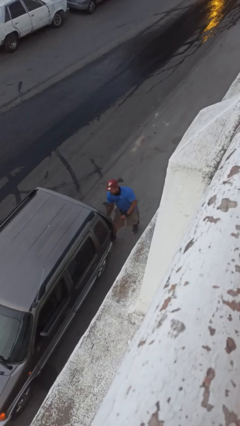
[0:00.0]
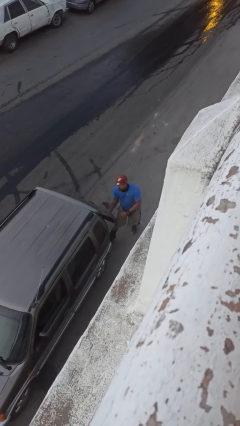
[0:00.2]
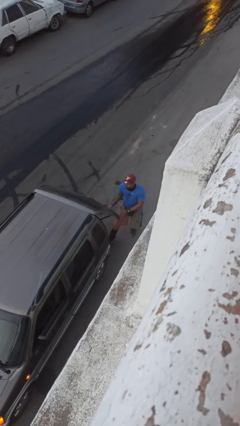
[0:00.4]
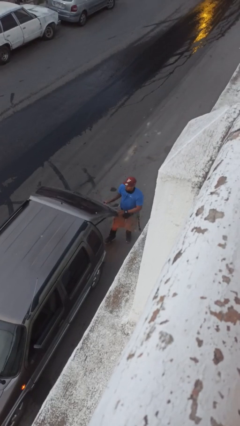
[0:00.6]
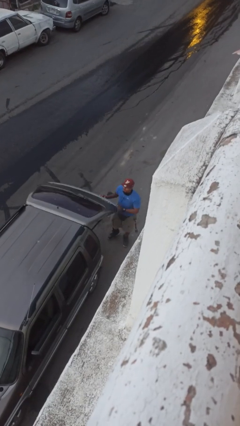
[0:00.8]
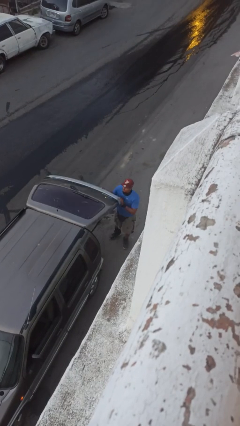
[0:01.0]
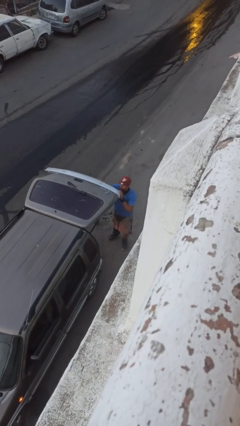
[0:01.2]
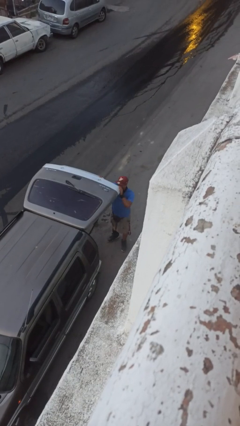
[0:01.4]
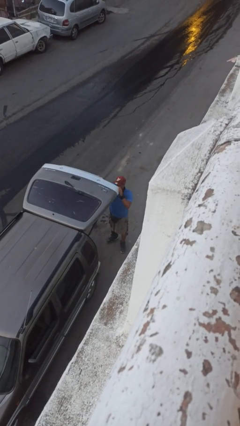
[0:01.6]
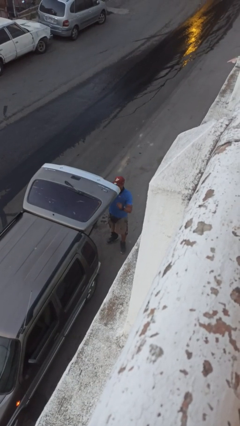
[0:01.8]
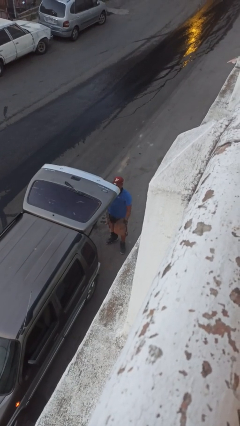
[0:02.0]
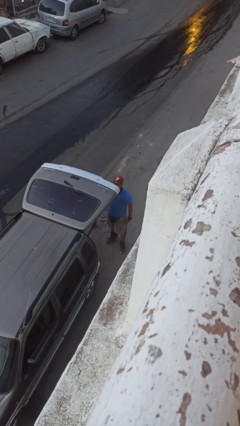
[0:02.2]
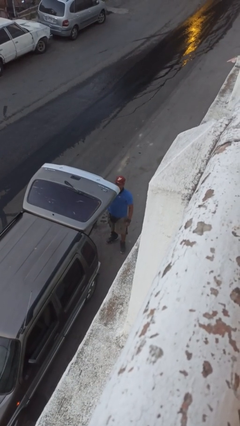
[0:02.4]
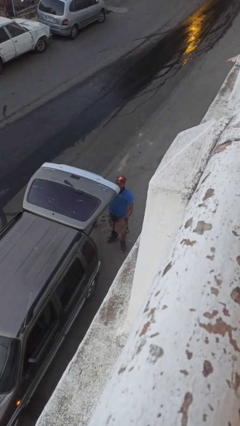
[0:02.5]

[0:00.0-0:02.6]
person opens car trunk

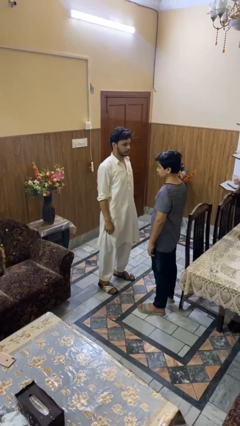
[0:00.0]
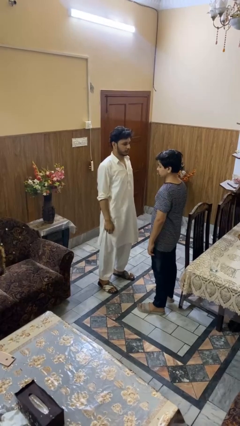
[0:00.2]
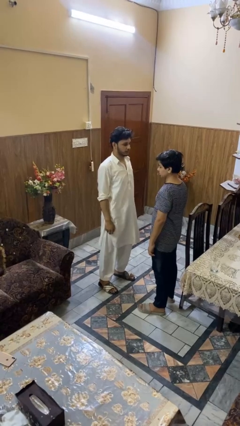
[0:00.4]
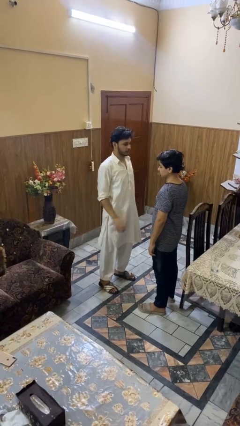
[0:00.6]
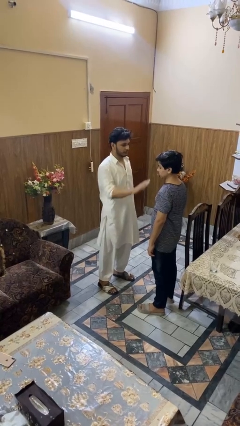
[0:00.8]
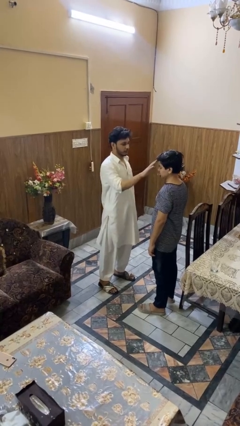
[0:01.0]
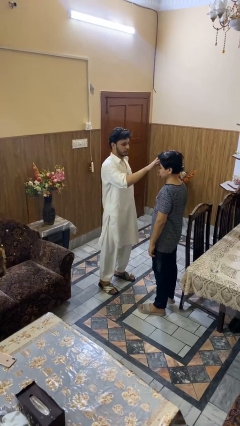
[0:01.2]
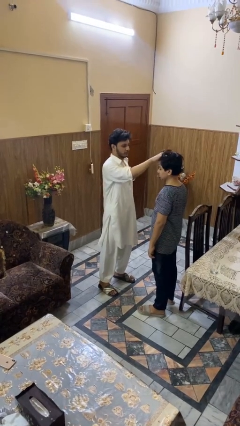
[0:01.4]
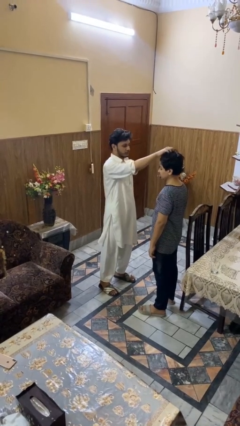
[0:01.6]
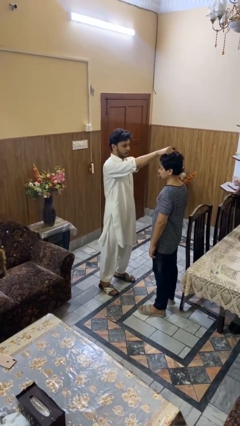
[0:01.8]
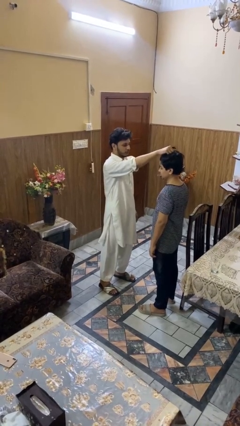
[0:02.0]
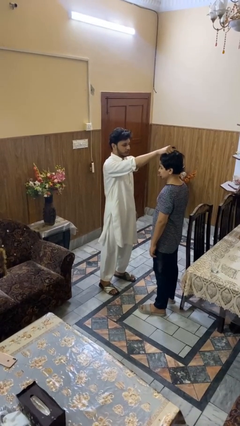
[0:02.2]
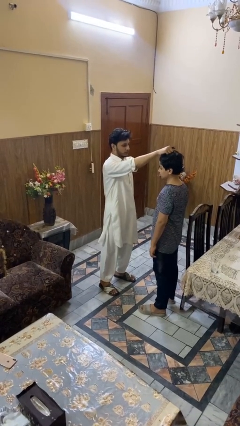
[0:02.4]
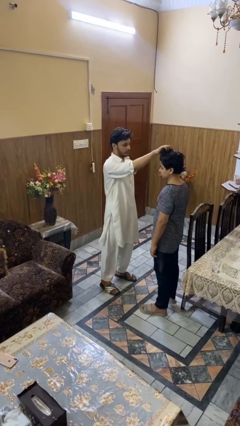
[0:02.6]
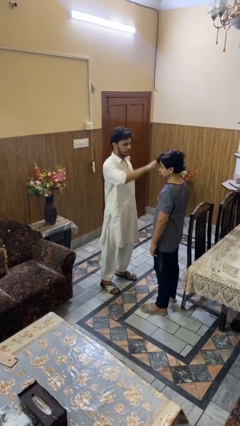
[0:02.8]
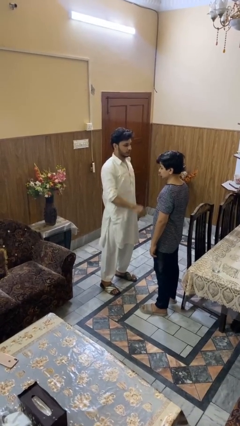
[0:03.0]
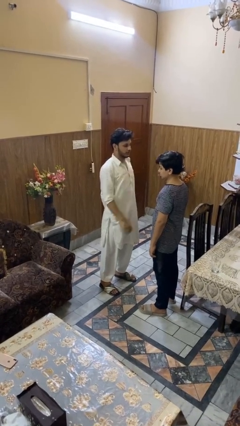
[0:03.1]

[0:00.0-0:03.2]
person grabs person by hair

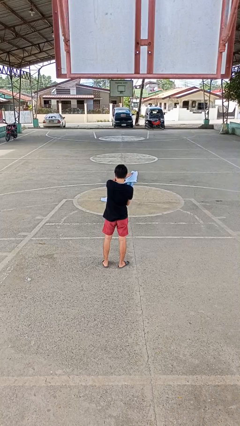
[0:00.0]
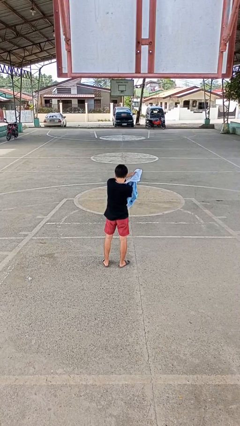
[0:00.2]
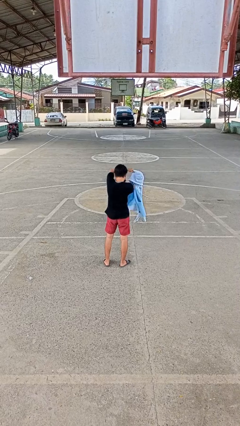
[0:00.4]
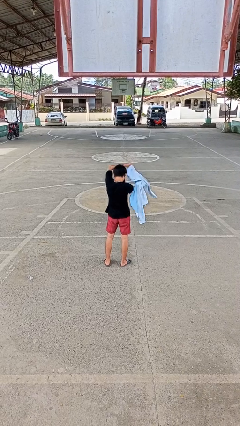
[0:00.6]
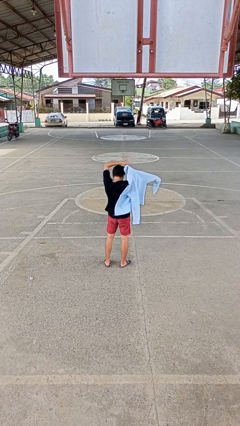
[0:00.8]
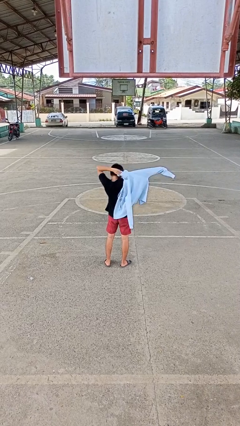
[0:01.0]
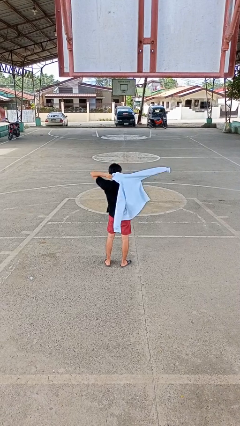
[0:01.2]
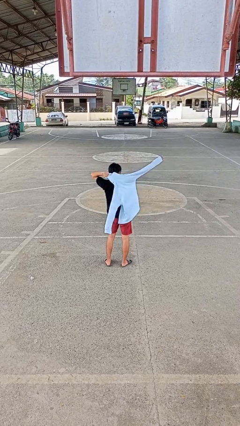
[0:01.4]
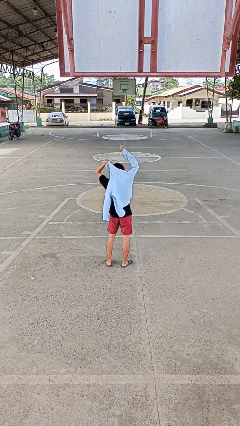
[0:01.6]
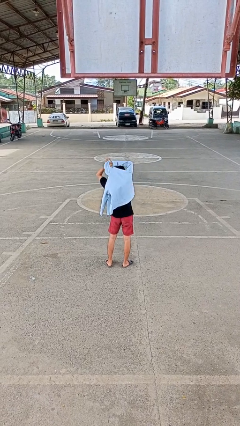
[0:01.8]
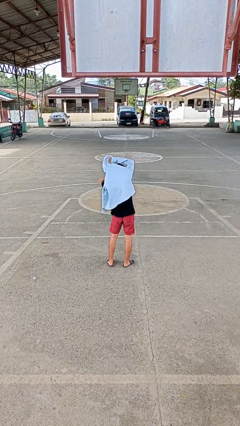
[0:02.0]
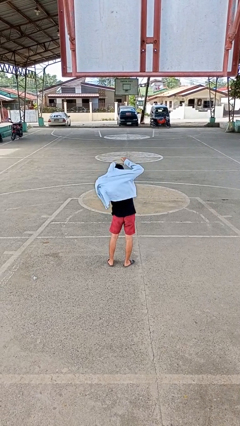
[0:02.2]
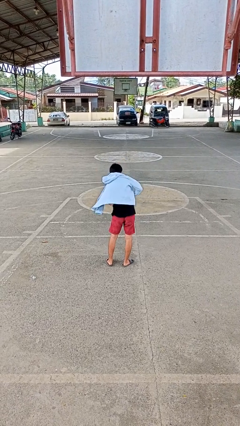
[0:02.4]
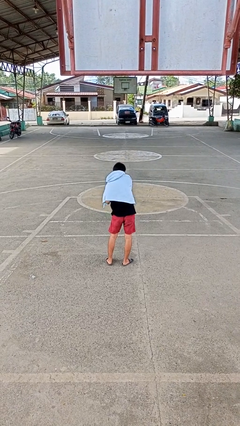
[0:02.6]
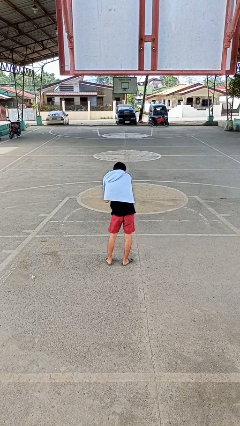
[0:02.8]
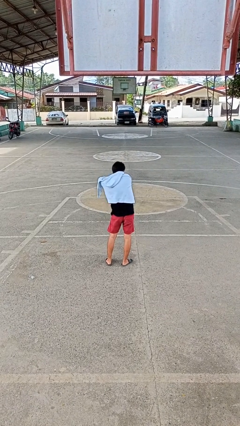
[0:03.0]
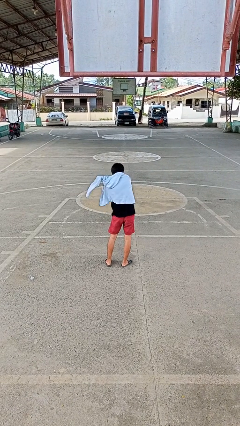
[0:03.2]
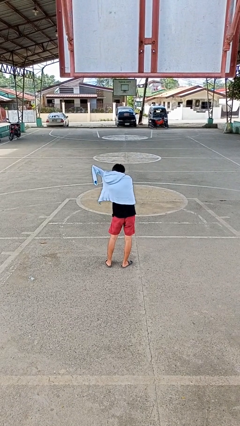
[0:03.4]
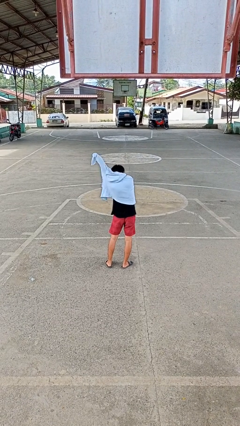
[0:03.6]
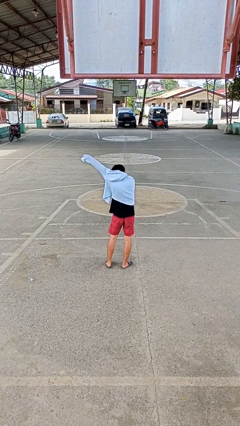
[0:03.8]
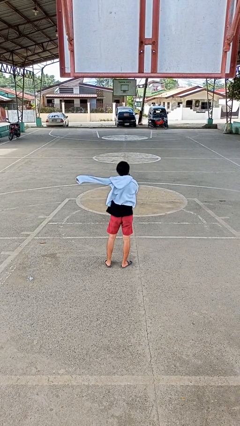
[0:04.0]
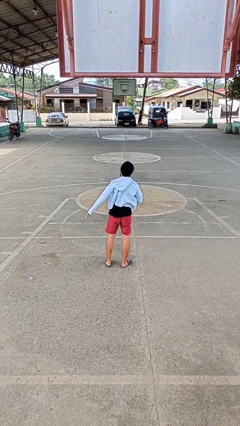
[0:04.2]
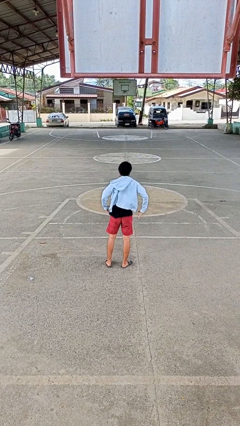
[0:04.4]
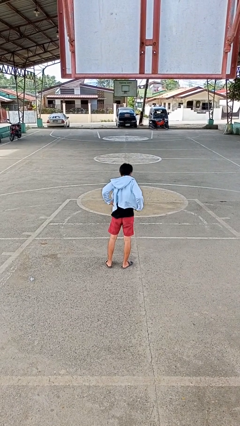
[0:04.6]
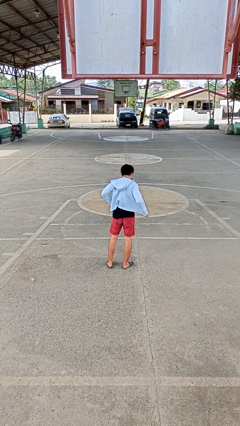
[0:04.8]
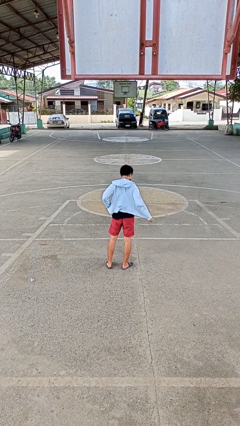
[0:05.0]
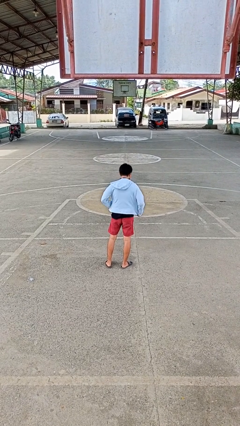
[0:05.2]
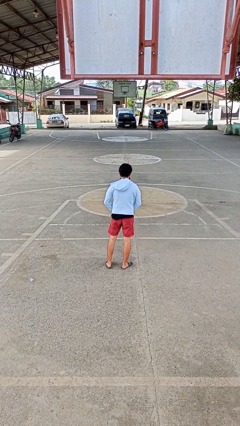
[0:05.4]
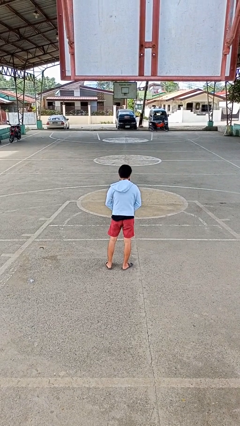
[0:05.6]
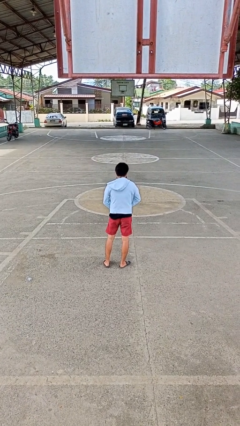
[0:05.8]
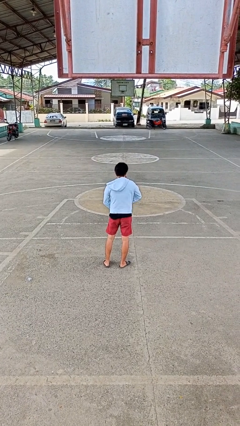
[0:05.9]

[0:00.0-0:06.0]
person puts on jacket

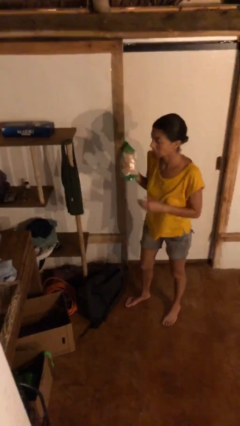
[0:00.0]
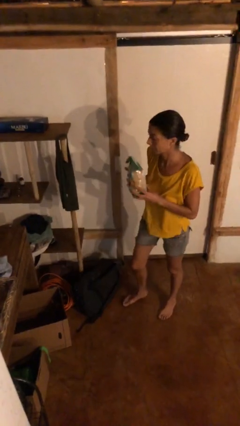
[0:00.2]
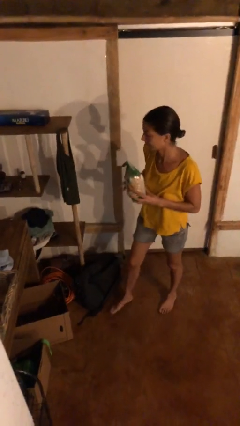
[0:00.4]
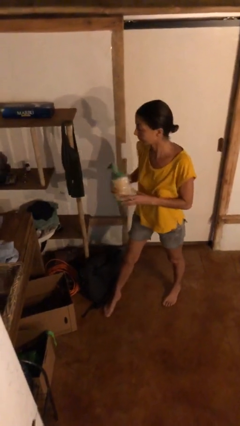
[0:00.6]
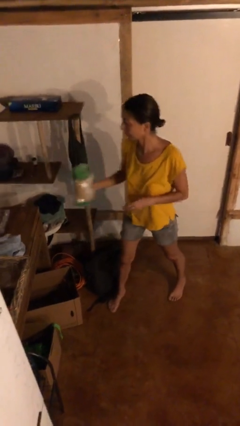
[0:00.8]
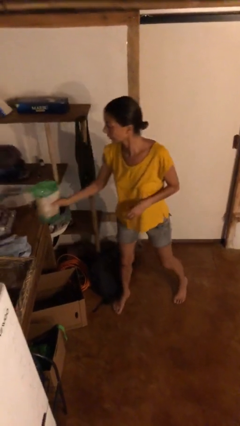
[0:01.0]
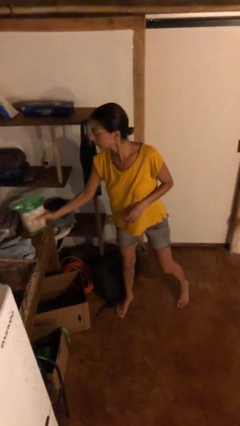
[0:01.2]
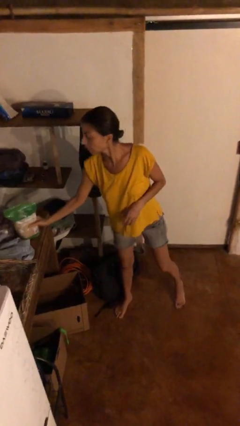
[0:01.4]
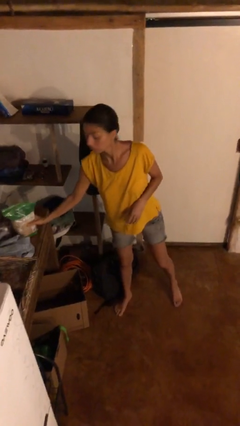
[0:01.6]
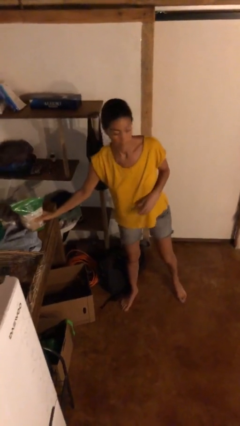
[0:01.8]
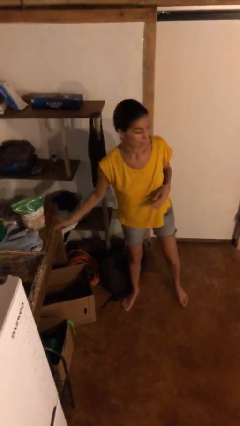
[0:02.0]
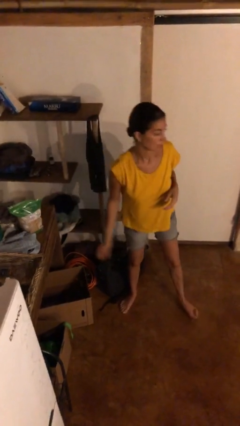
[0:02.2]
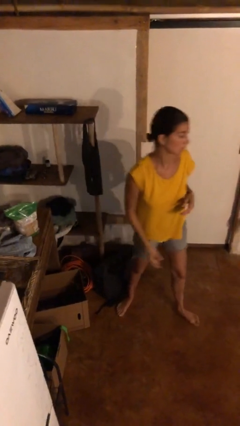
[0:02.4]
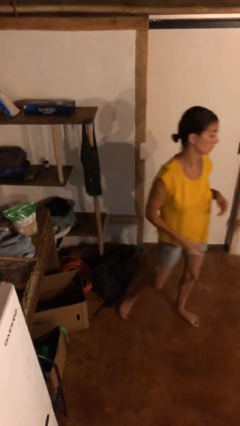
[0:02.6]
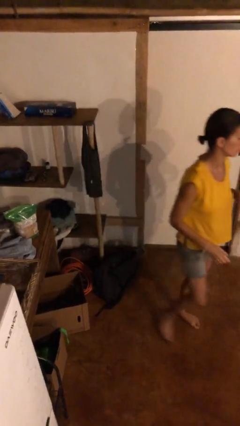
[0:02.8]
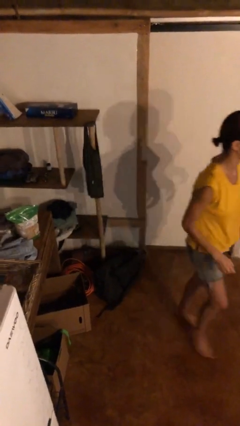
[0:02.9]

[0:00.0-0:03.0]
person puts down object on table

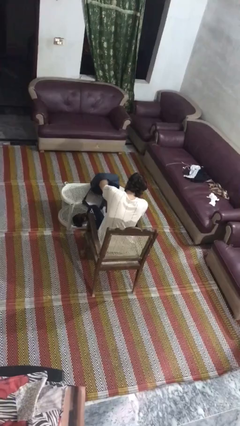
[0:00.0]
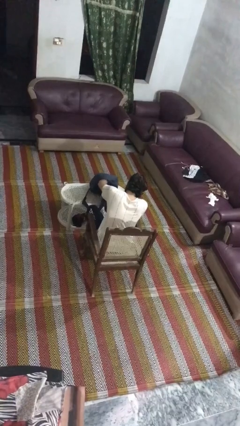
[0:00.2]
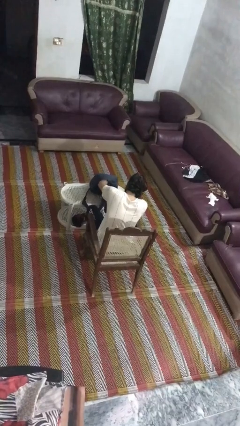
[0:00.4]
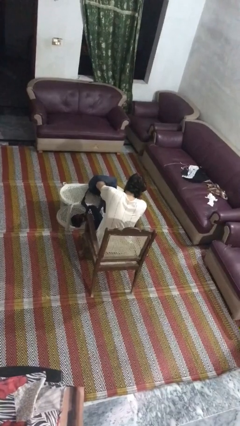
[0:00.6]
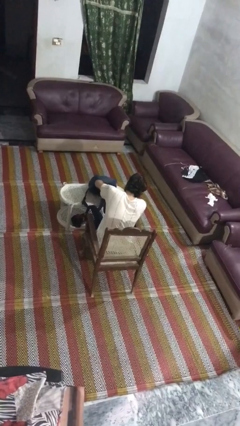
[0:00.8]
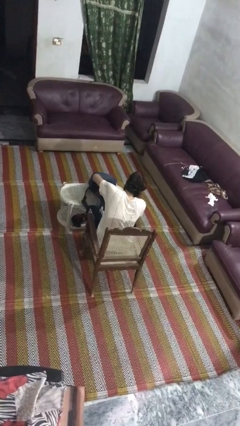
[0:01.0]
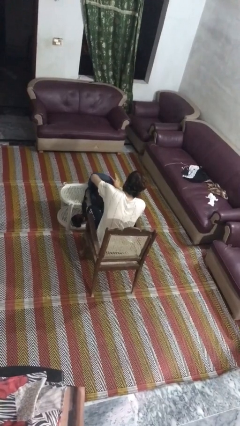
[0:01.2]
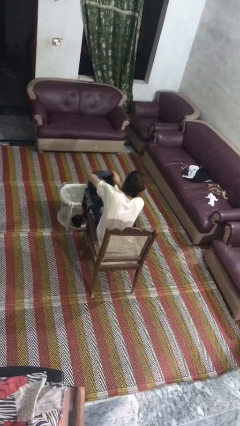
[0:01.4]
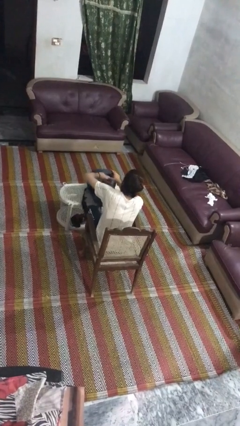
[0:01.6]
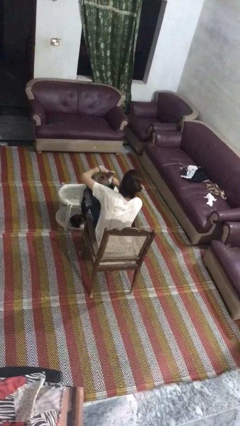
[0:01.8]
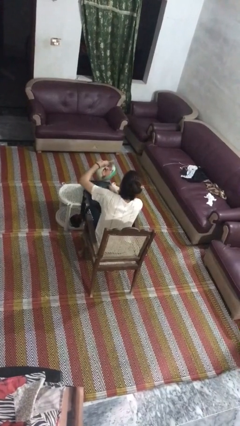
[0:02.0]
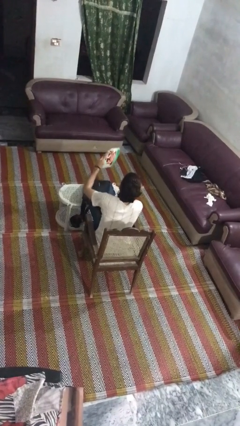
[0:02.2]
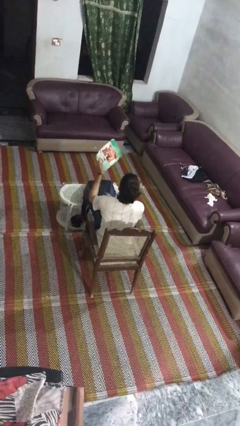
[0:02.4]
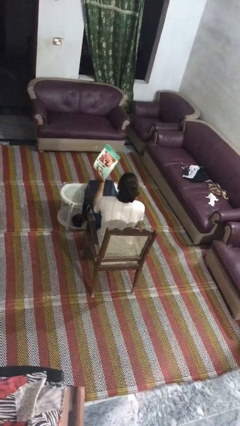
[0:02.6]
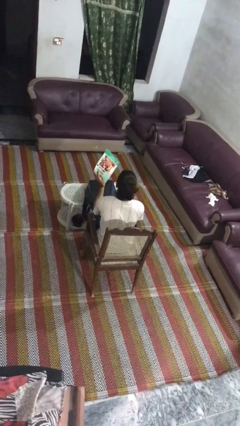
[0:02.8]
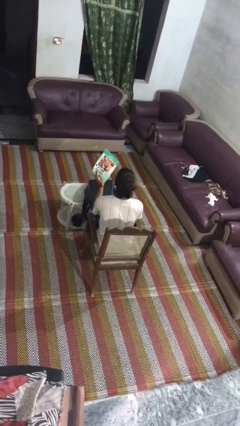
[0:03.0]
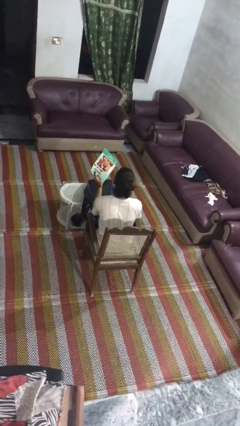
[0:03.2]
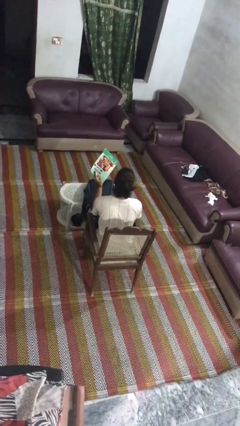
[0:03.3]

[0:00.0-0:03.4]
person takes object from backpack
